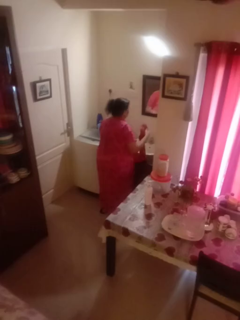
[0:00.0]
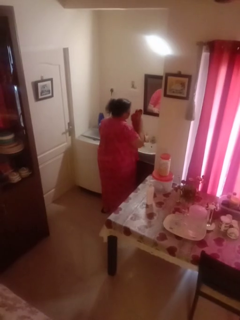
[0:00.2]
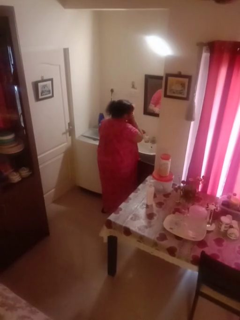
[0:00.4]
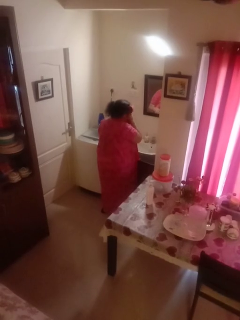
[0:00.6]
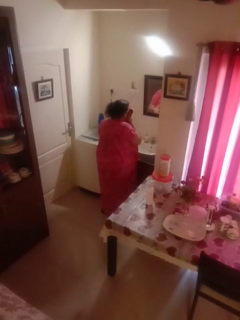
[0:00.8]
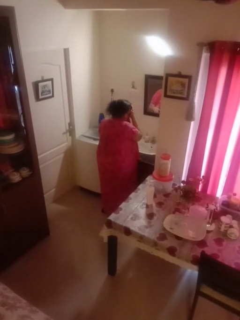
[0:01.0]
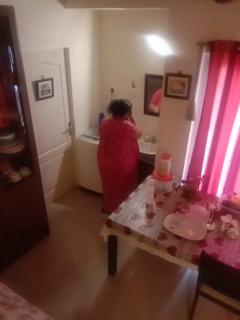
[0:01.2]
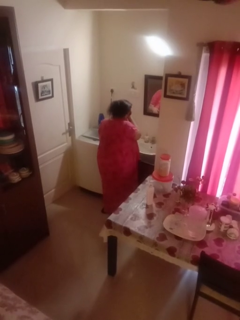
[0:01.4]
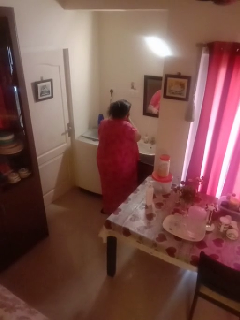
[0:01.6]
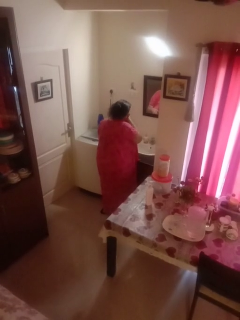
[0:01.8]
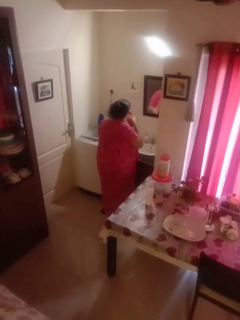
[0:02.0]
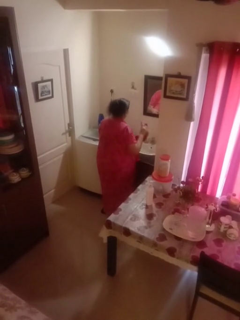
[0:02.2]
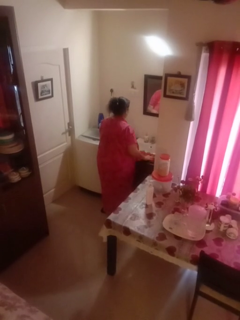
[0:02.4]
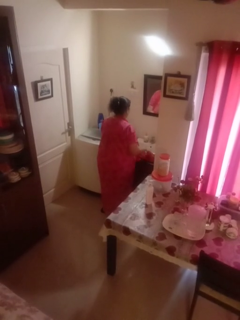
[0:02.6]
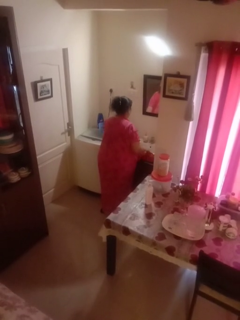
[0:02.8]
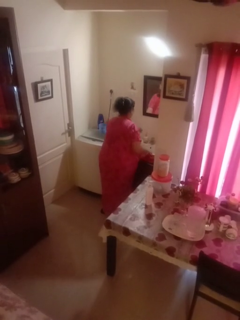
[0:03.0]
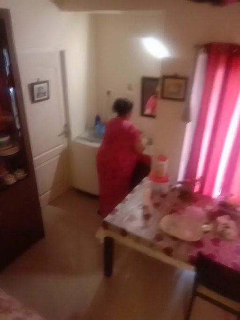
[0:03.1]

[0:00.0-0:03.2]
person dries face with towel

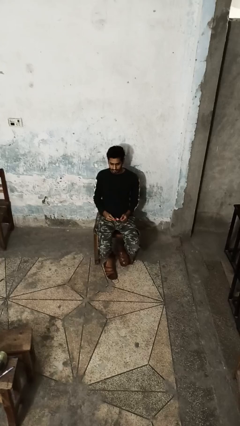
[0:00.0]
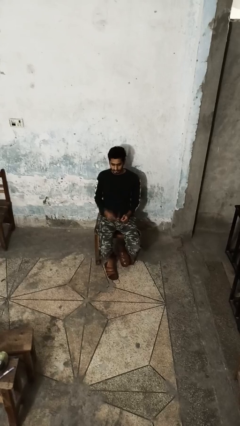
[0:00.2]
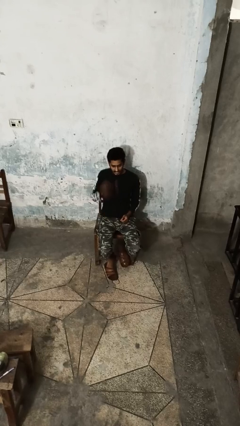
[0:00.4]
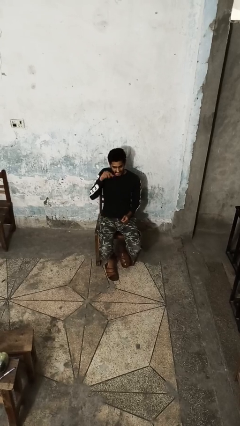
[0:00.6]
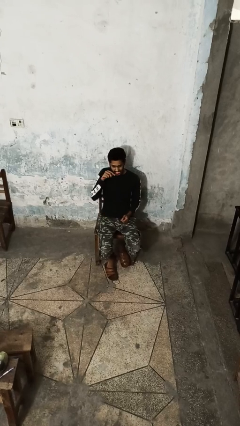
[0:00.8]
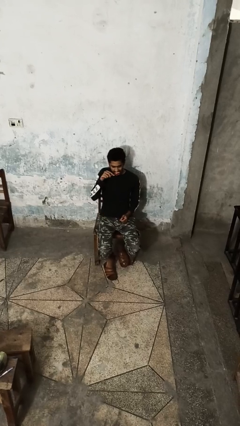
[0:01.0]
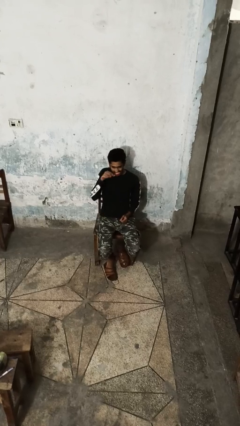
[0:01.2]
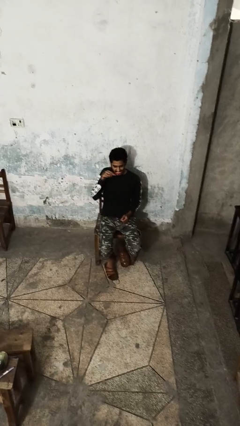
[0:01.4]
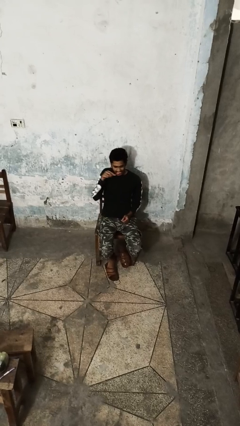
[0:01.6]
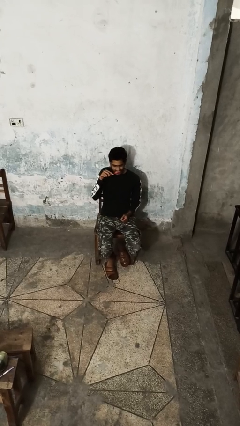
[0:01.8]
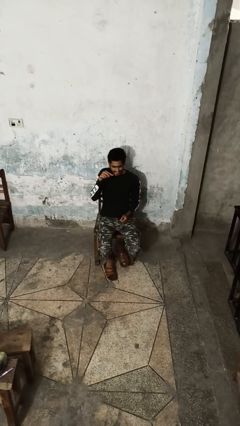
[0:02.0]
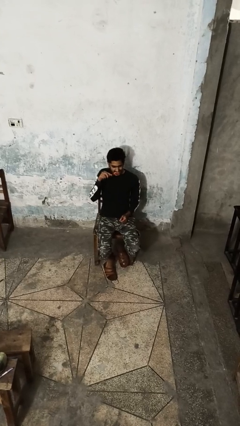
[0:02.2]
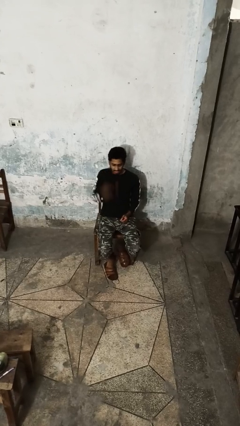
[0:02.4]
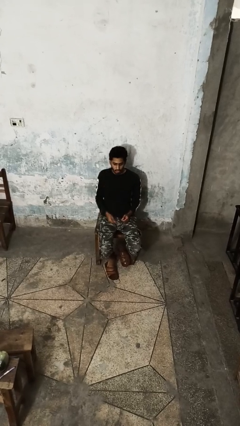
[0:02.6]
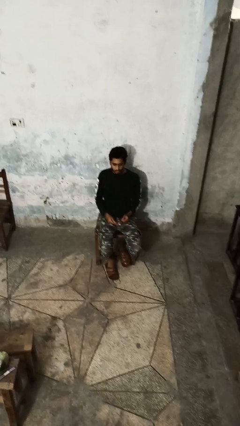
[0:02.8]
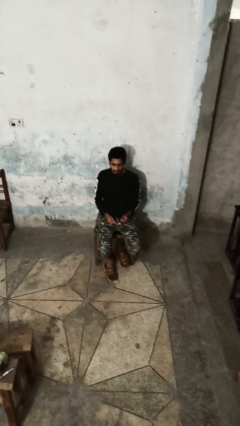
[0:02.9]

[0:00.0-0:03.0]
person brushes teeth

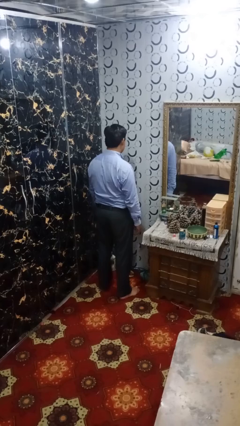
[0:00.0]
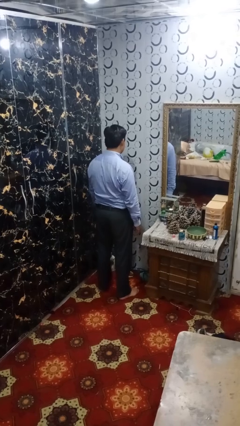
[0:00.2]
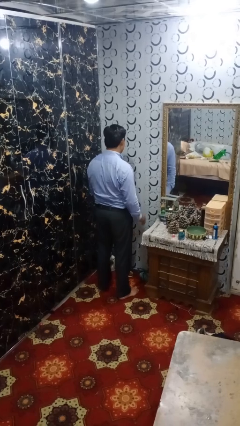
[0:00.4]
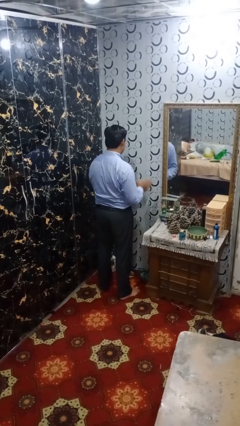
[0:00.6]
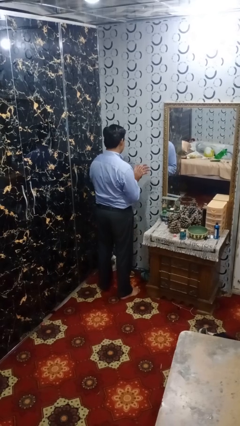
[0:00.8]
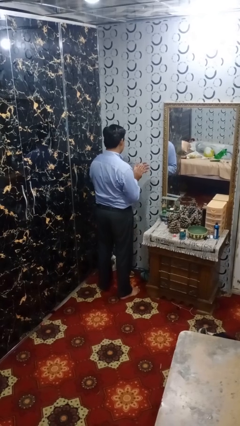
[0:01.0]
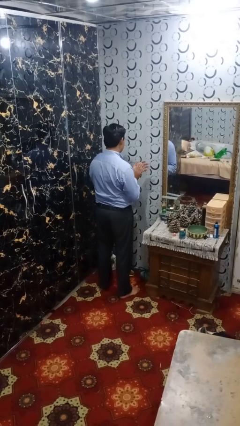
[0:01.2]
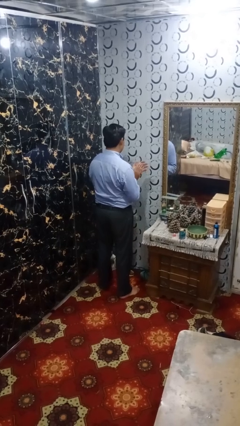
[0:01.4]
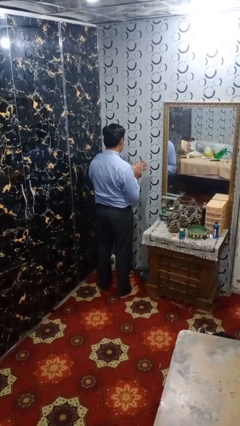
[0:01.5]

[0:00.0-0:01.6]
person claps hands

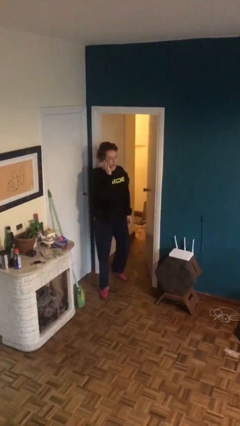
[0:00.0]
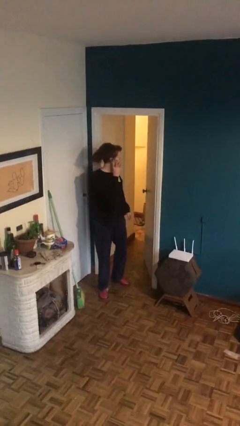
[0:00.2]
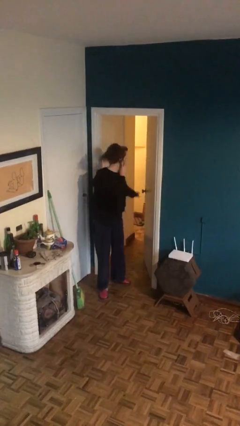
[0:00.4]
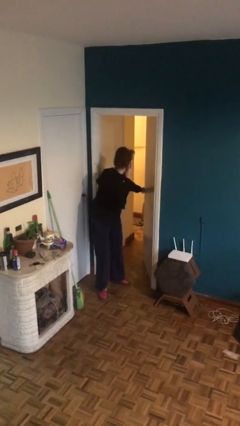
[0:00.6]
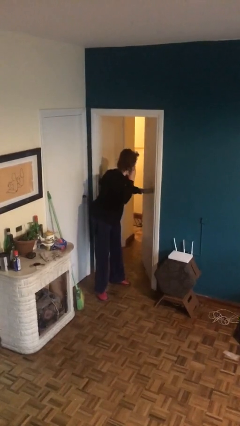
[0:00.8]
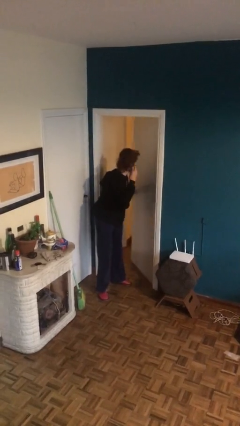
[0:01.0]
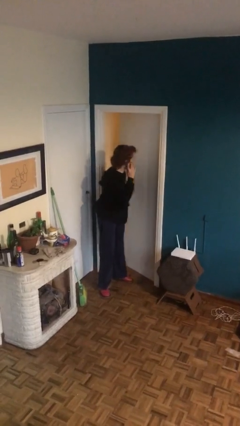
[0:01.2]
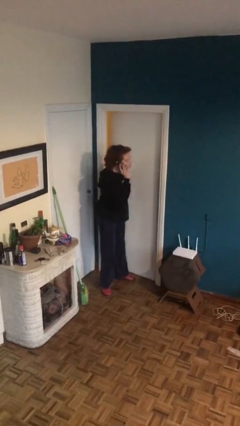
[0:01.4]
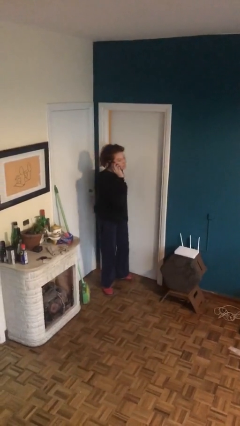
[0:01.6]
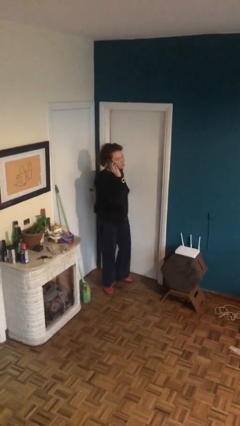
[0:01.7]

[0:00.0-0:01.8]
person closes facility door

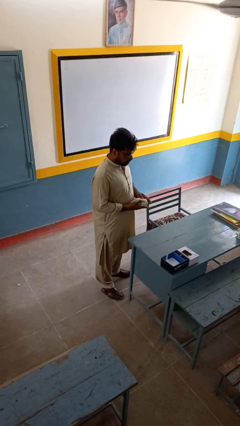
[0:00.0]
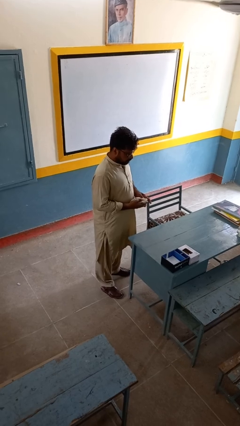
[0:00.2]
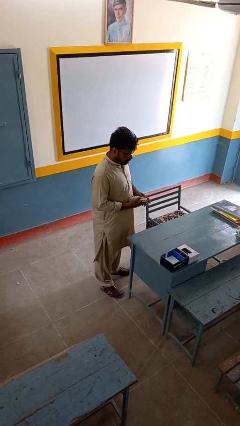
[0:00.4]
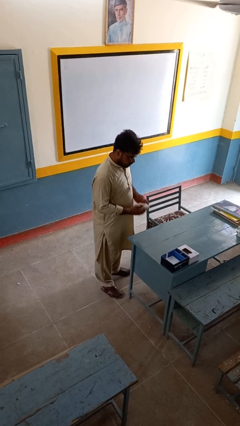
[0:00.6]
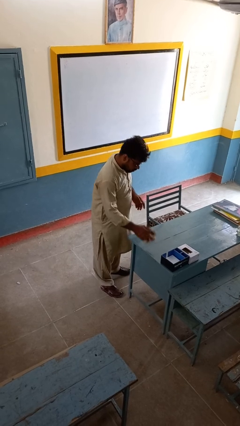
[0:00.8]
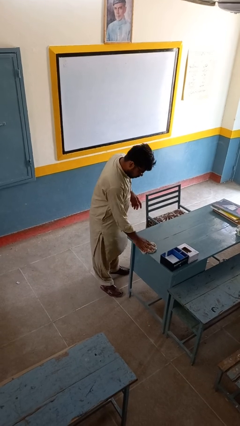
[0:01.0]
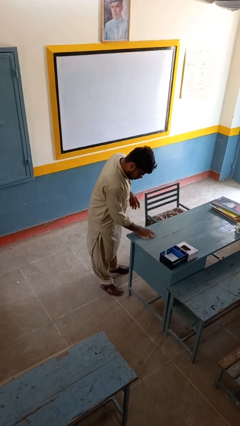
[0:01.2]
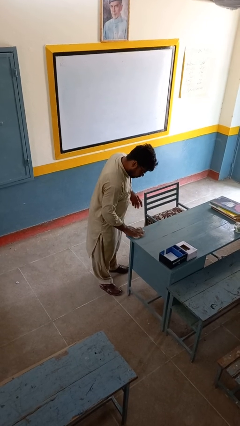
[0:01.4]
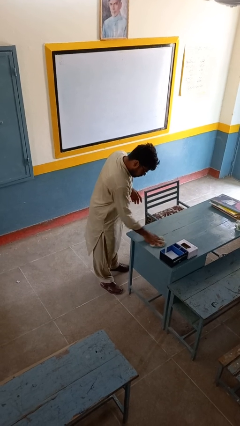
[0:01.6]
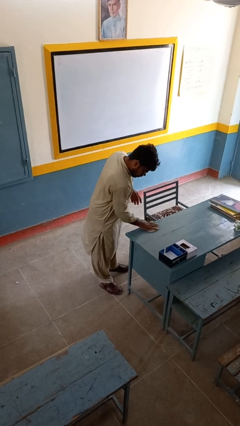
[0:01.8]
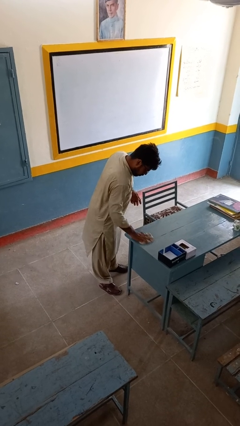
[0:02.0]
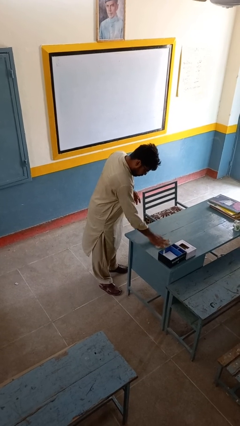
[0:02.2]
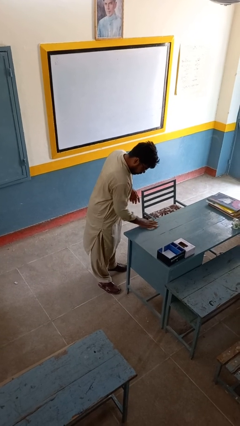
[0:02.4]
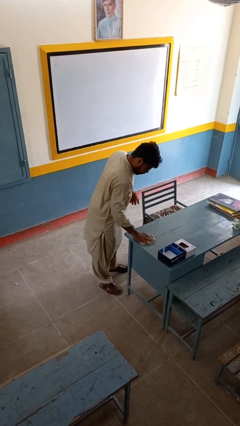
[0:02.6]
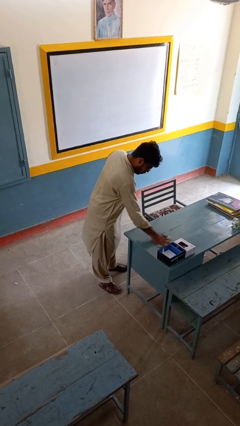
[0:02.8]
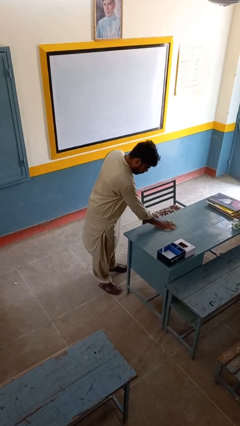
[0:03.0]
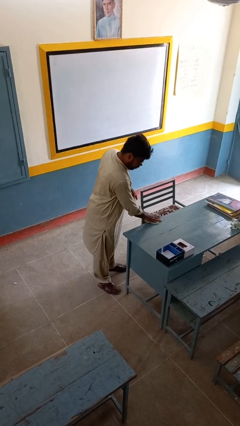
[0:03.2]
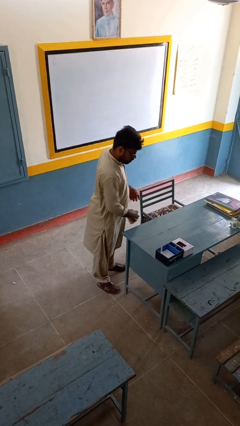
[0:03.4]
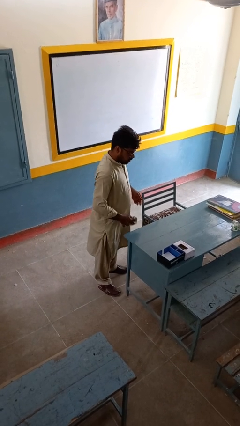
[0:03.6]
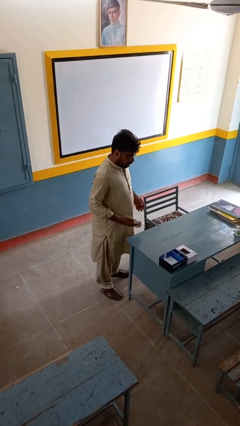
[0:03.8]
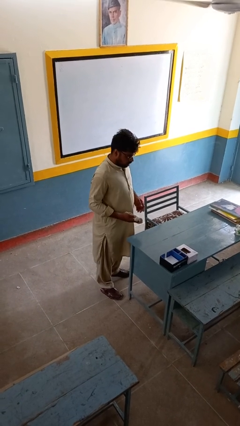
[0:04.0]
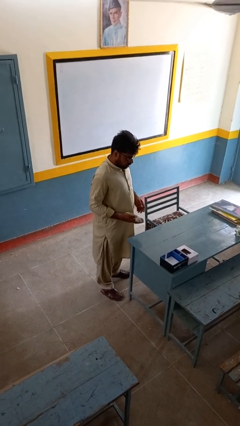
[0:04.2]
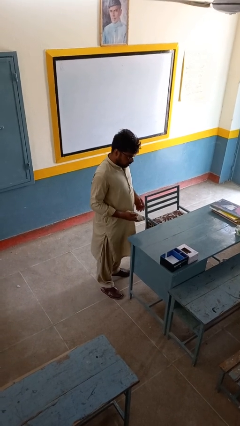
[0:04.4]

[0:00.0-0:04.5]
person cleans table with rag

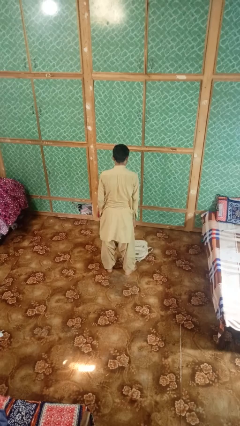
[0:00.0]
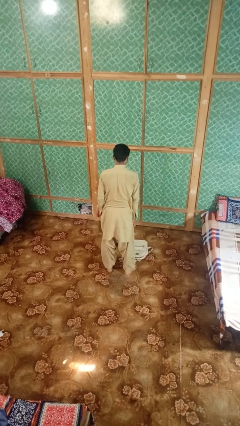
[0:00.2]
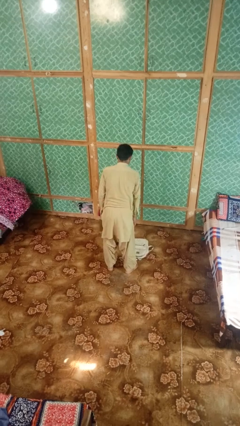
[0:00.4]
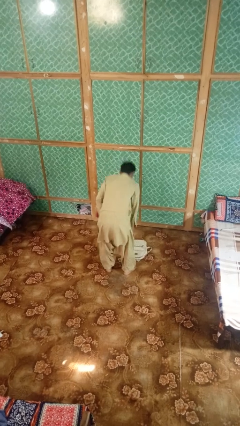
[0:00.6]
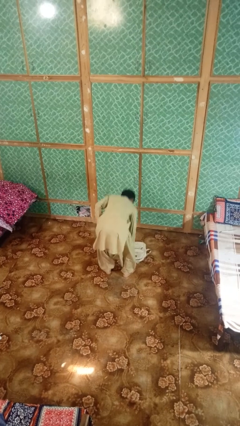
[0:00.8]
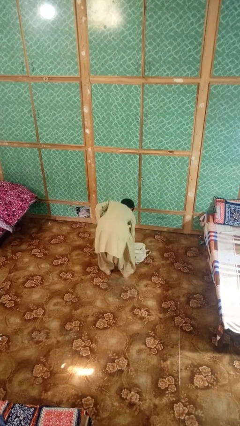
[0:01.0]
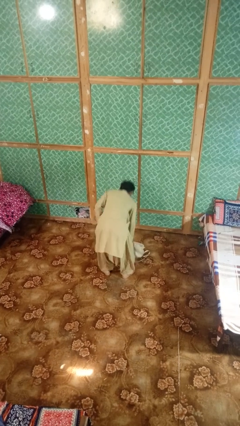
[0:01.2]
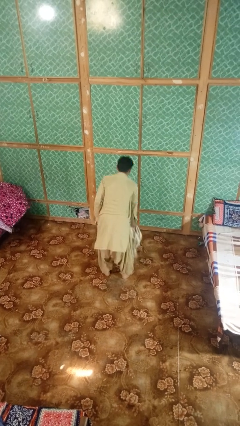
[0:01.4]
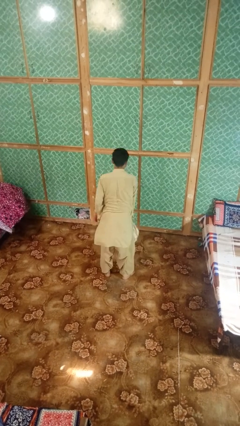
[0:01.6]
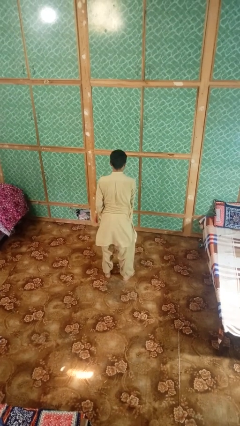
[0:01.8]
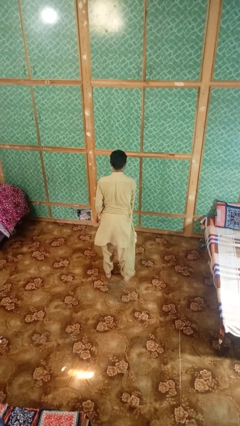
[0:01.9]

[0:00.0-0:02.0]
person picks up object from floor

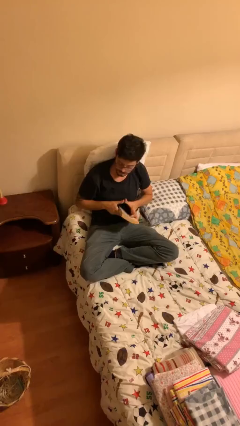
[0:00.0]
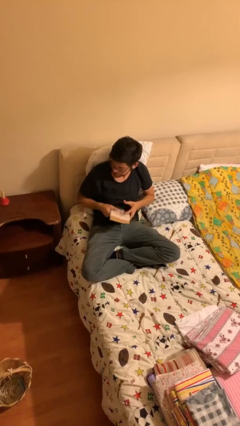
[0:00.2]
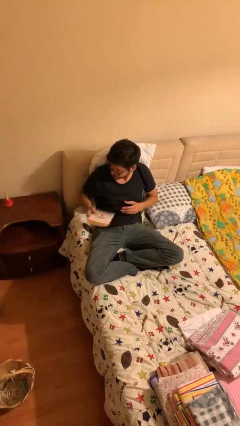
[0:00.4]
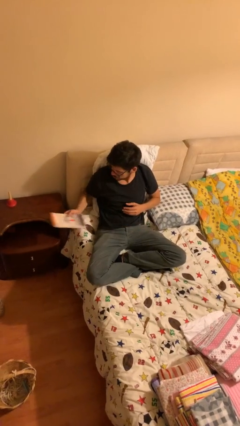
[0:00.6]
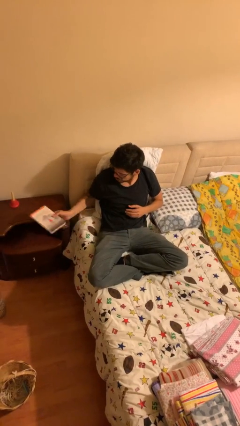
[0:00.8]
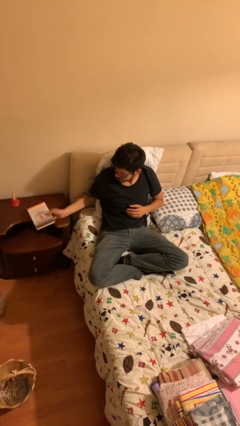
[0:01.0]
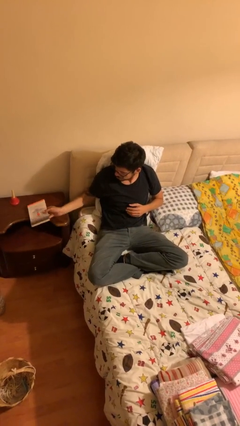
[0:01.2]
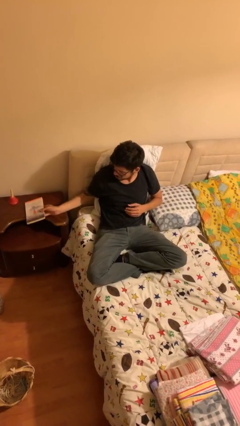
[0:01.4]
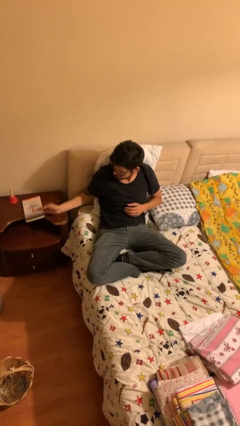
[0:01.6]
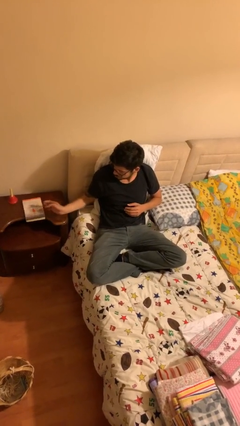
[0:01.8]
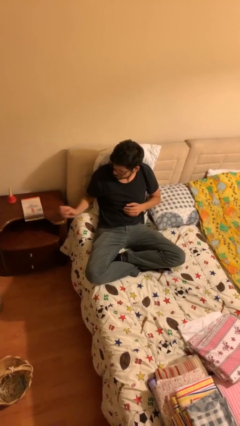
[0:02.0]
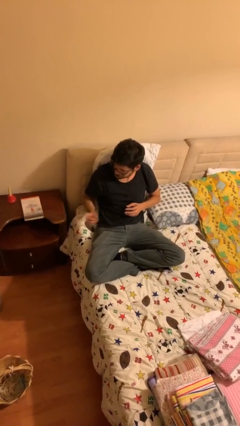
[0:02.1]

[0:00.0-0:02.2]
person puts down object on table
